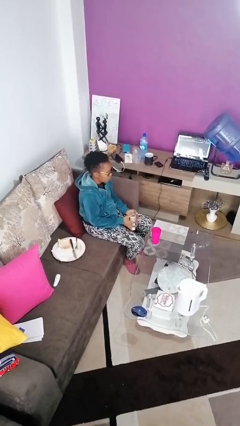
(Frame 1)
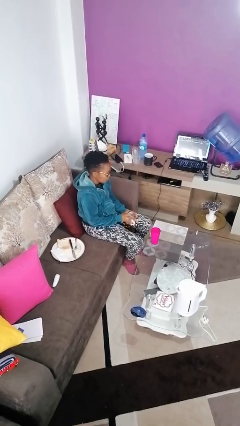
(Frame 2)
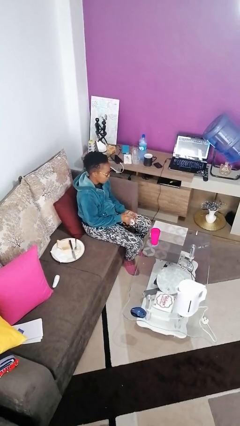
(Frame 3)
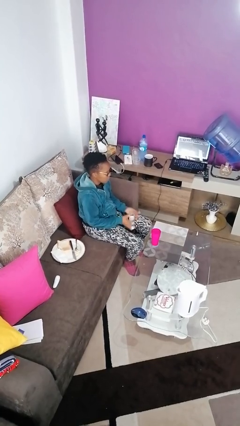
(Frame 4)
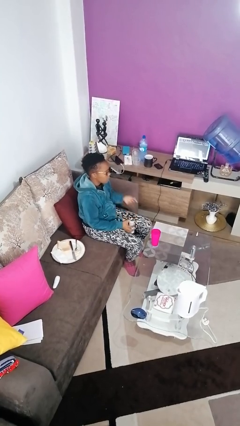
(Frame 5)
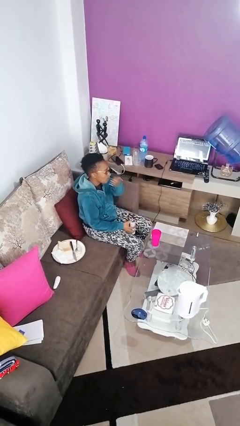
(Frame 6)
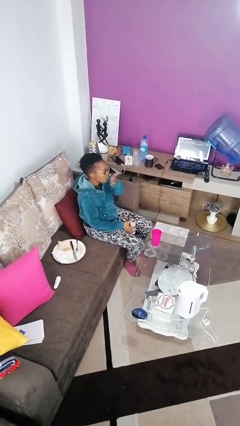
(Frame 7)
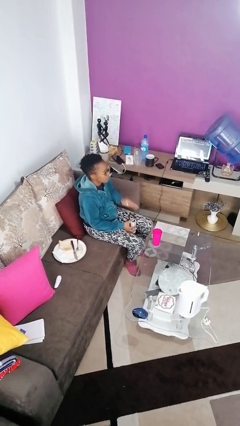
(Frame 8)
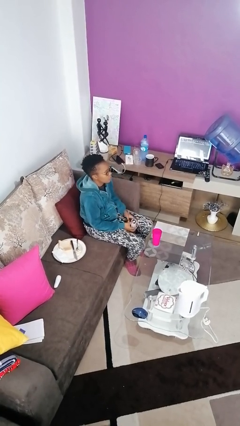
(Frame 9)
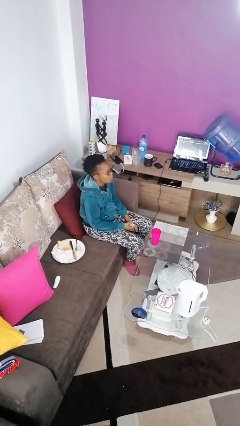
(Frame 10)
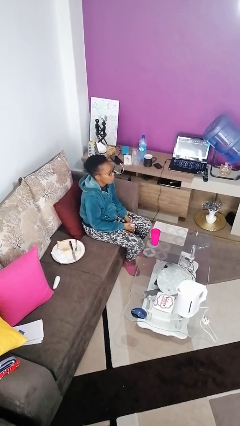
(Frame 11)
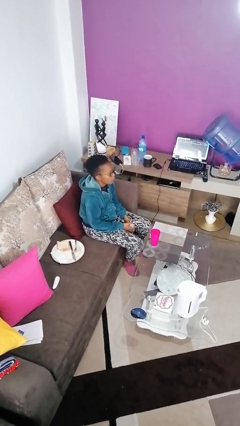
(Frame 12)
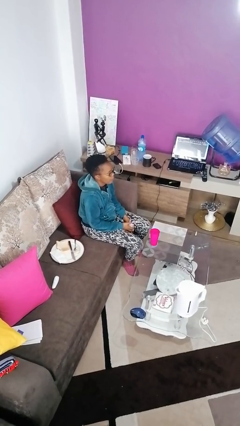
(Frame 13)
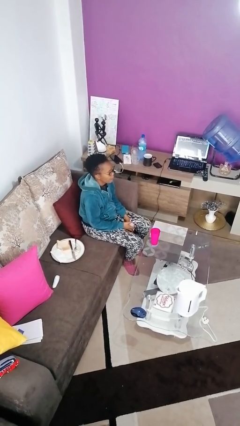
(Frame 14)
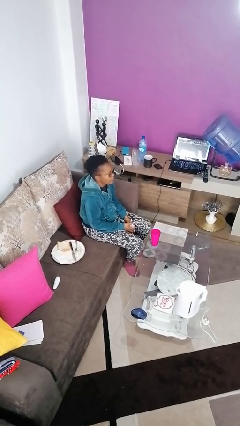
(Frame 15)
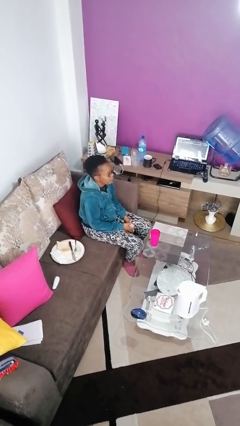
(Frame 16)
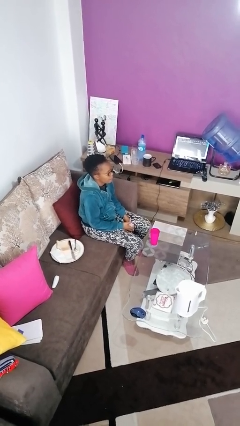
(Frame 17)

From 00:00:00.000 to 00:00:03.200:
person takes medicine pills

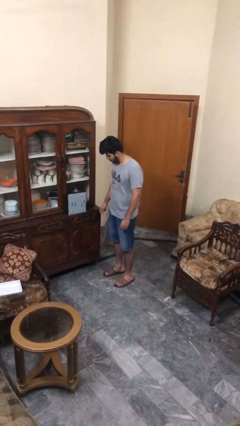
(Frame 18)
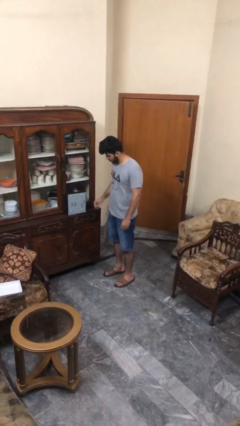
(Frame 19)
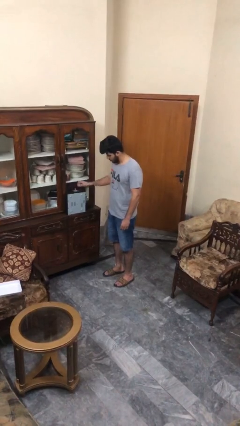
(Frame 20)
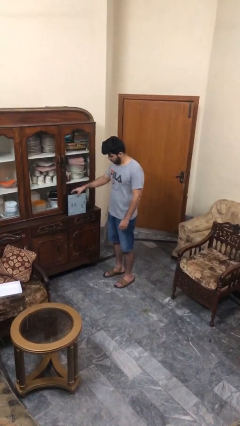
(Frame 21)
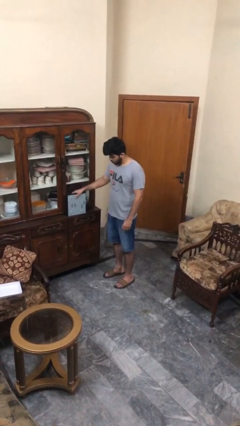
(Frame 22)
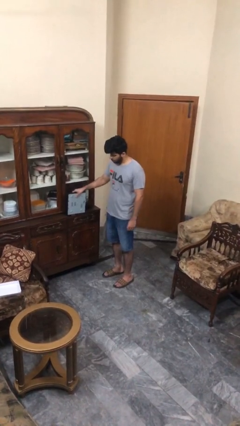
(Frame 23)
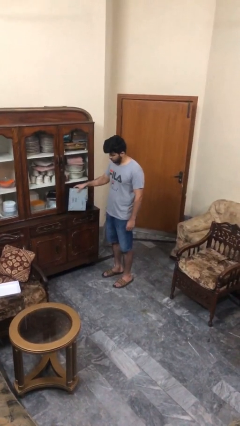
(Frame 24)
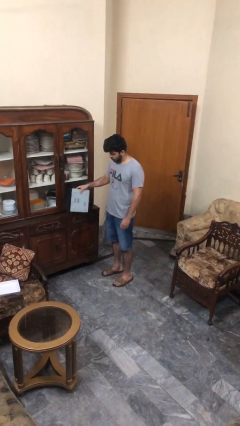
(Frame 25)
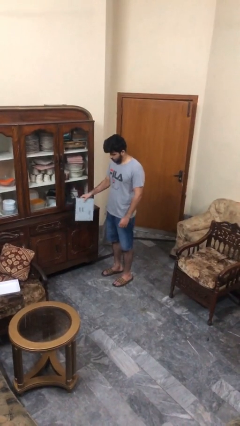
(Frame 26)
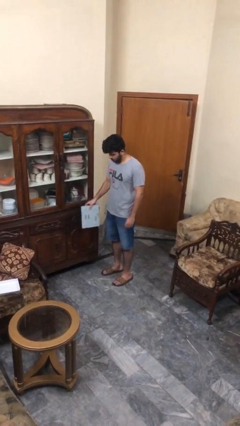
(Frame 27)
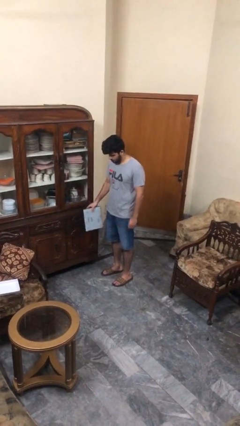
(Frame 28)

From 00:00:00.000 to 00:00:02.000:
person picks up object from countertop

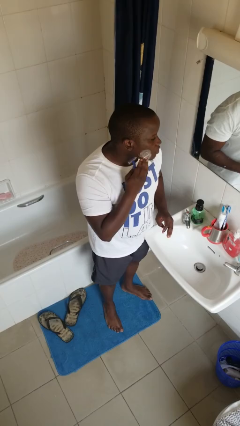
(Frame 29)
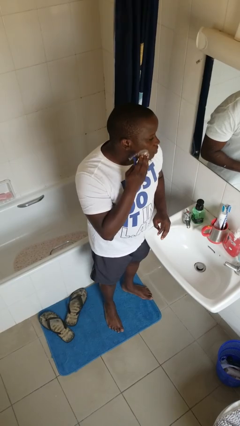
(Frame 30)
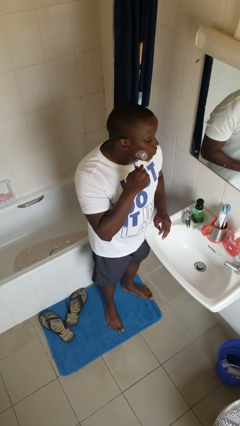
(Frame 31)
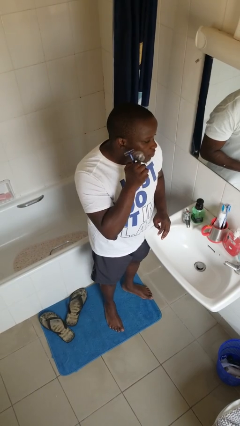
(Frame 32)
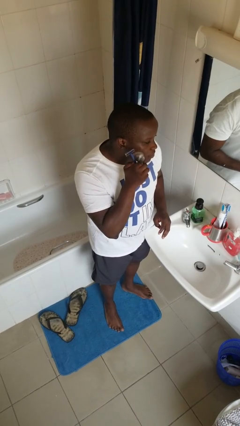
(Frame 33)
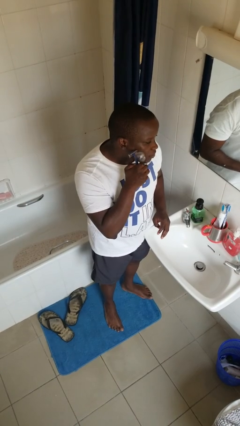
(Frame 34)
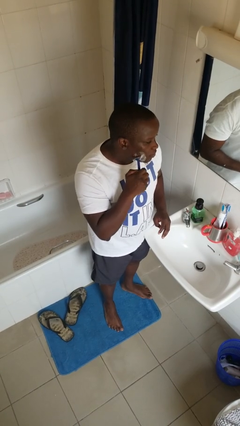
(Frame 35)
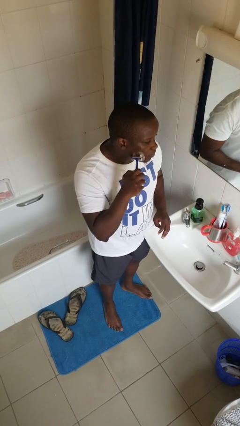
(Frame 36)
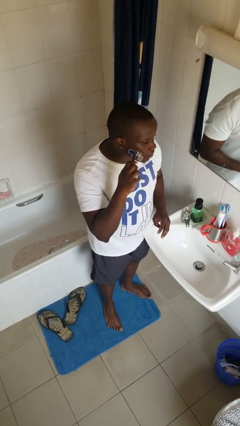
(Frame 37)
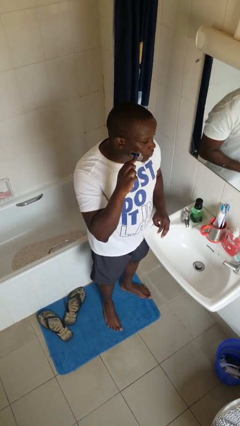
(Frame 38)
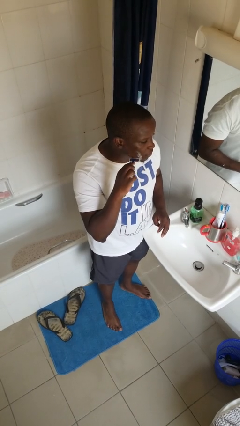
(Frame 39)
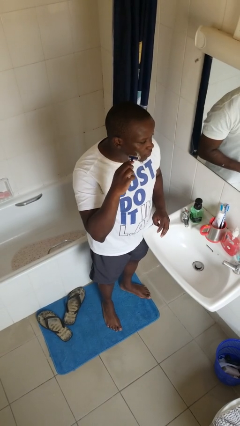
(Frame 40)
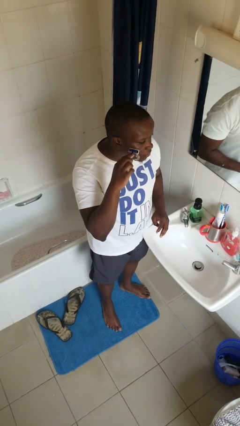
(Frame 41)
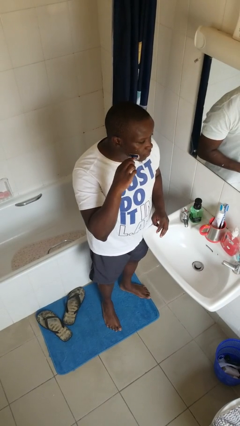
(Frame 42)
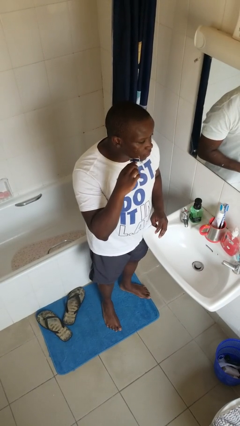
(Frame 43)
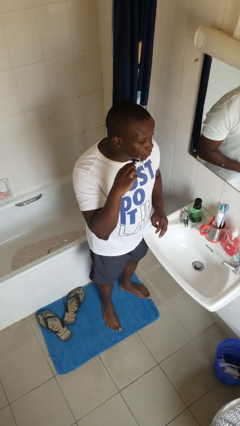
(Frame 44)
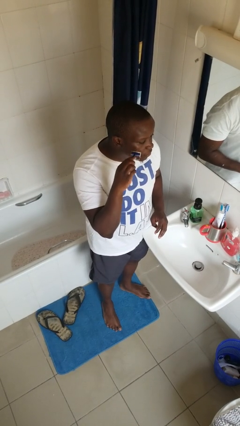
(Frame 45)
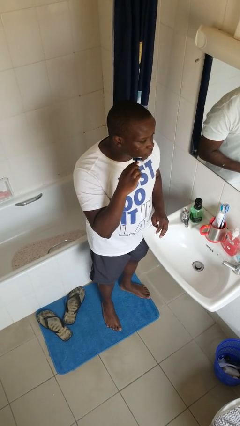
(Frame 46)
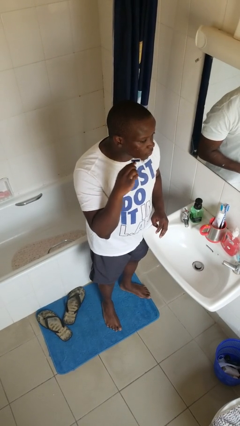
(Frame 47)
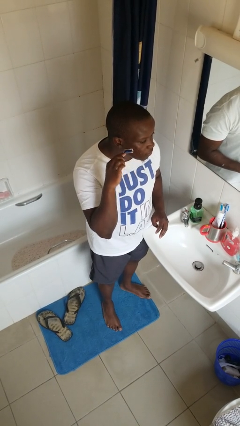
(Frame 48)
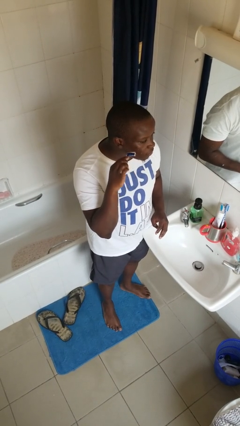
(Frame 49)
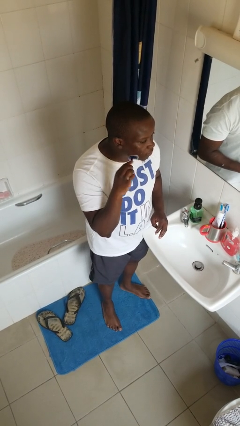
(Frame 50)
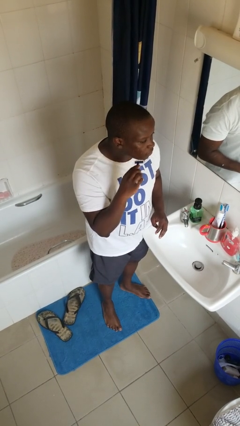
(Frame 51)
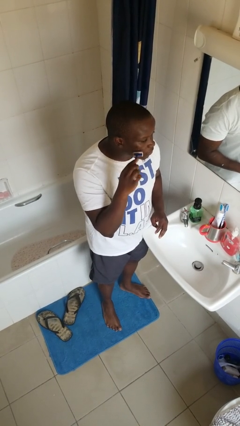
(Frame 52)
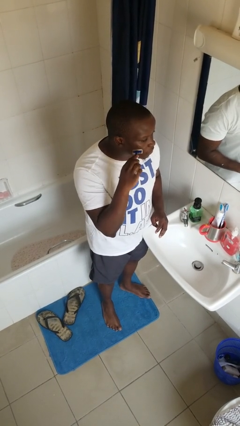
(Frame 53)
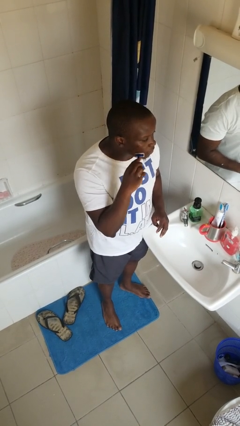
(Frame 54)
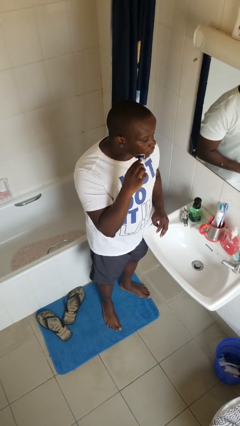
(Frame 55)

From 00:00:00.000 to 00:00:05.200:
person shaves face

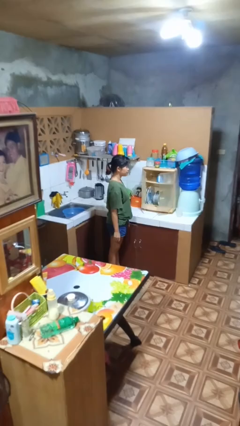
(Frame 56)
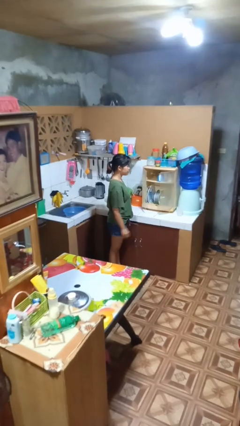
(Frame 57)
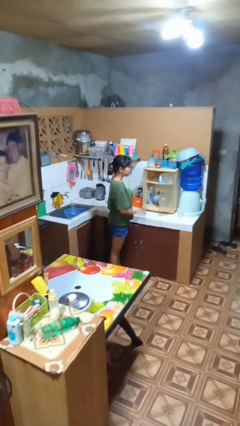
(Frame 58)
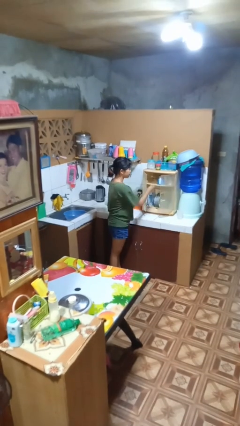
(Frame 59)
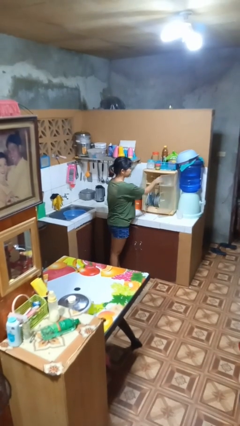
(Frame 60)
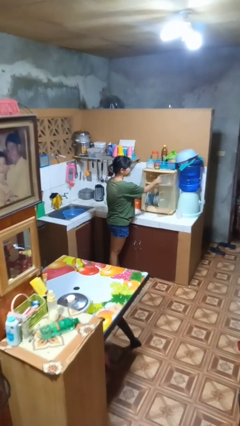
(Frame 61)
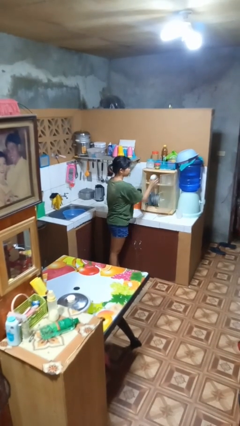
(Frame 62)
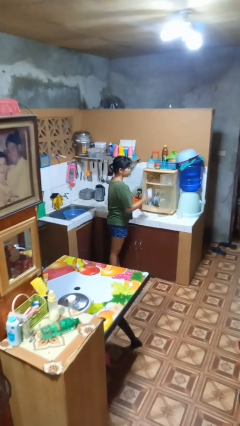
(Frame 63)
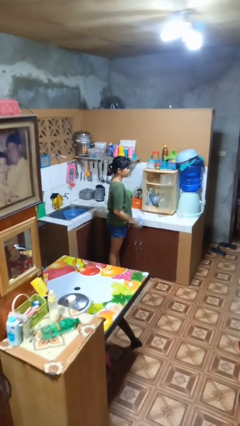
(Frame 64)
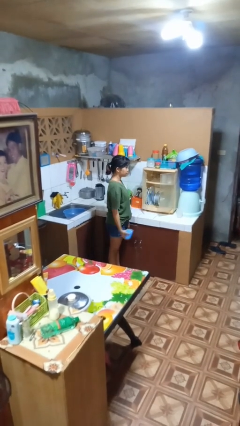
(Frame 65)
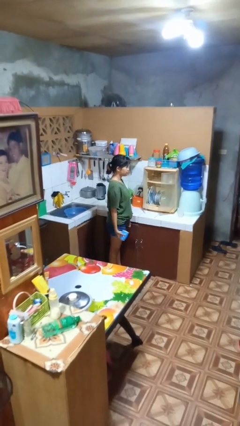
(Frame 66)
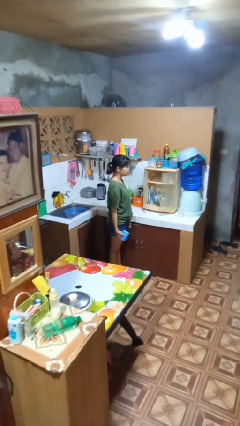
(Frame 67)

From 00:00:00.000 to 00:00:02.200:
person takes object from cabinet

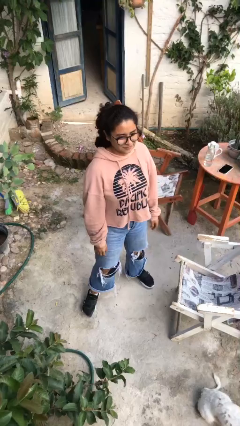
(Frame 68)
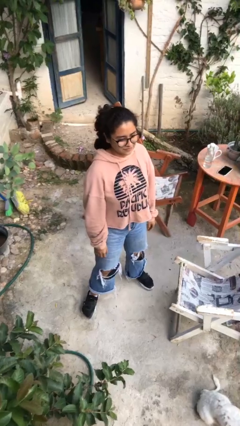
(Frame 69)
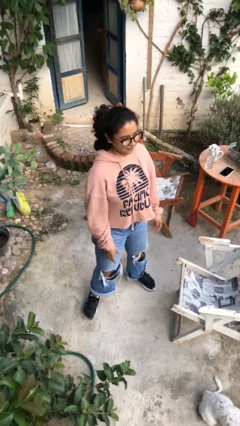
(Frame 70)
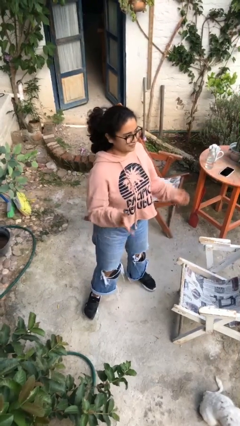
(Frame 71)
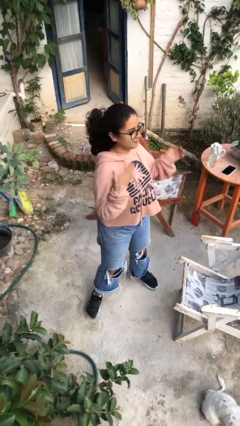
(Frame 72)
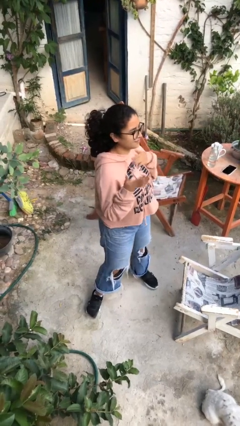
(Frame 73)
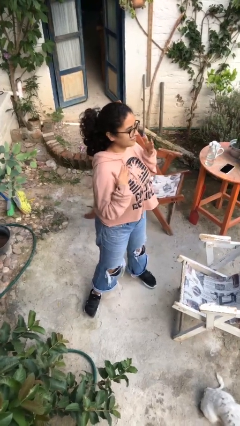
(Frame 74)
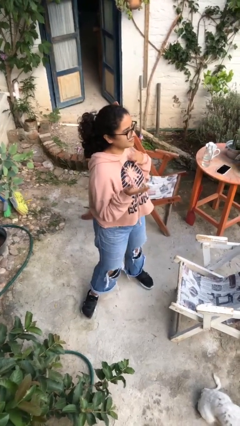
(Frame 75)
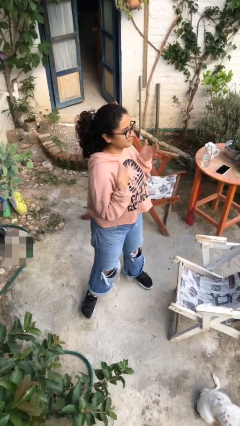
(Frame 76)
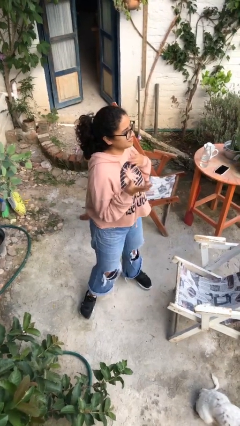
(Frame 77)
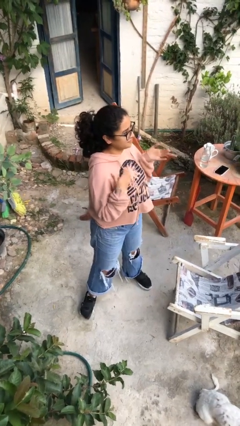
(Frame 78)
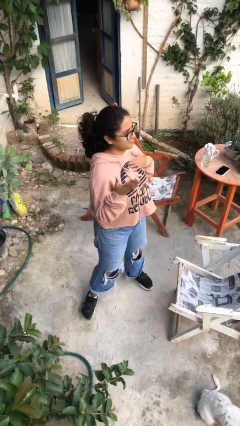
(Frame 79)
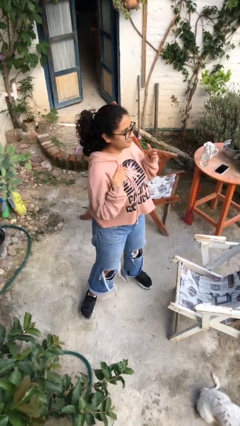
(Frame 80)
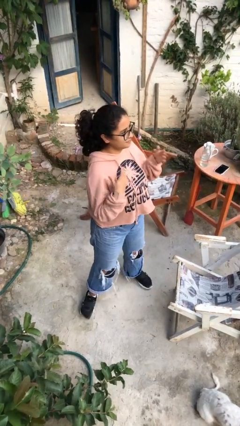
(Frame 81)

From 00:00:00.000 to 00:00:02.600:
person drums on chest

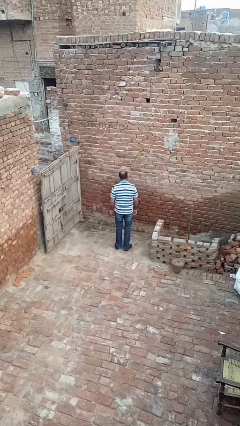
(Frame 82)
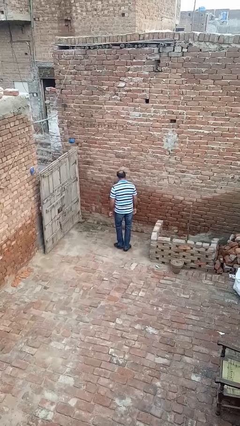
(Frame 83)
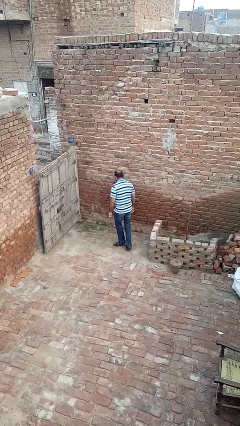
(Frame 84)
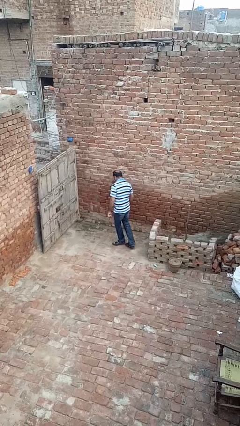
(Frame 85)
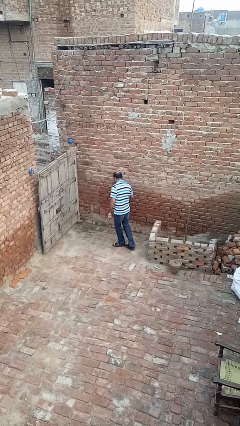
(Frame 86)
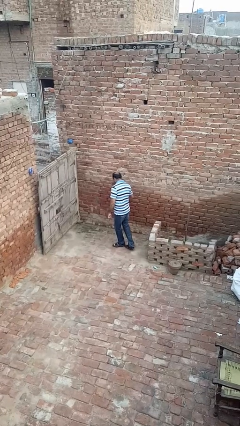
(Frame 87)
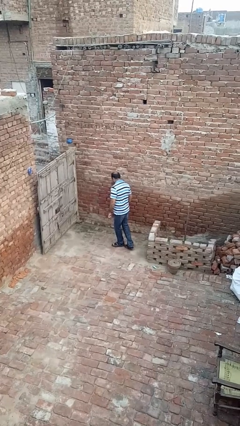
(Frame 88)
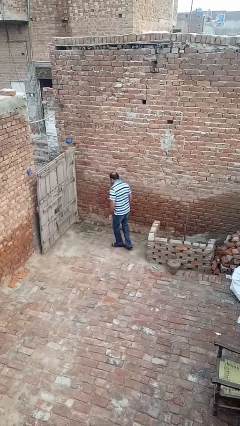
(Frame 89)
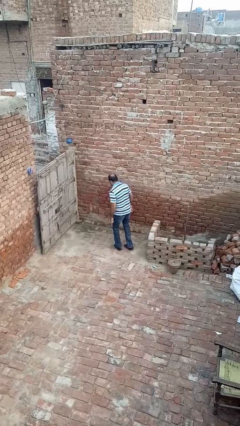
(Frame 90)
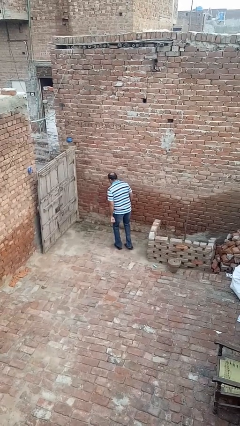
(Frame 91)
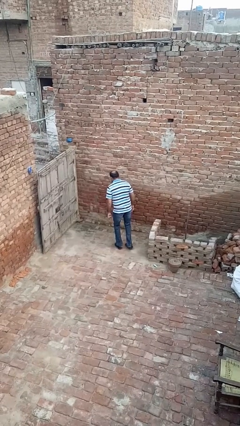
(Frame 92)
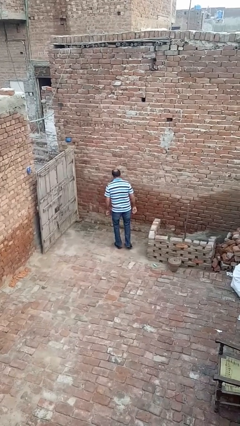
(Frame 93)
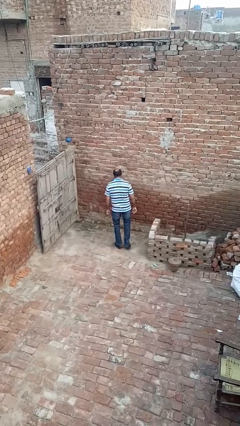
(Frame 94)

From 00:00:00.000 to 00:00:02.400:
person twirls
